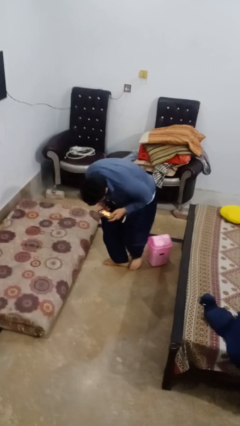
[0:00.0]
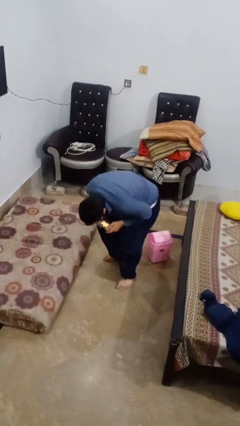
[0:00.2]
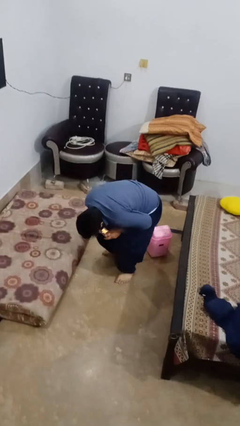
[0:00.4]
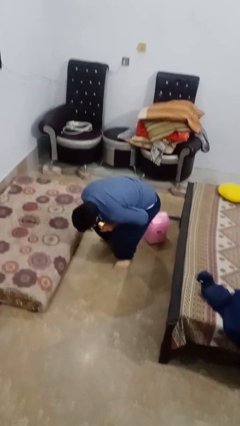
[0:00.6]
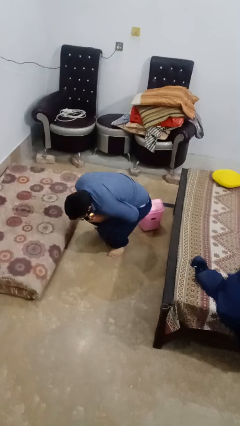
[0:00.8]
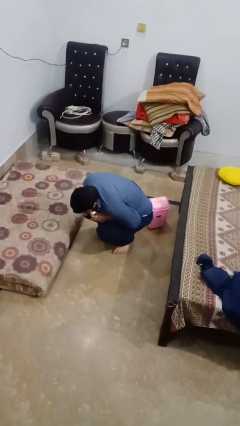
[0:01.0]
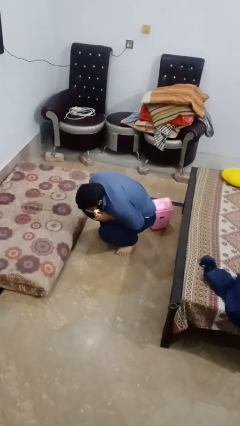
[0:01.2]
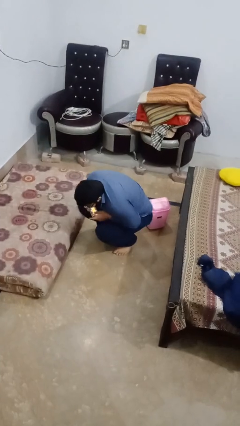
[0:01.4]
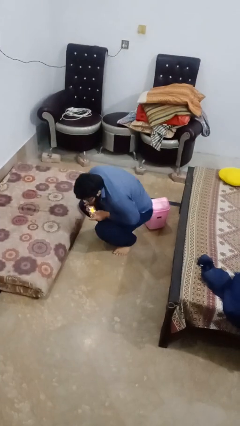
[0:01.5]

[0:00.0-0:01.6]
person lies down on floor

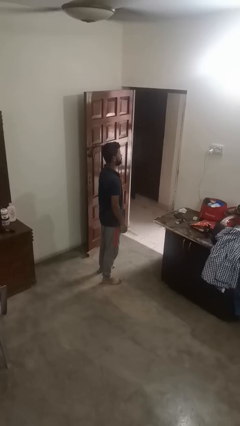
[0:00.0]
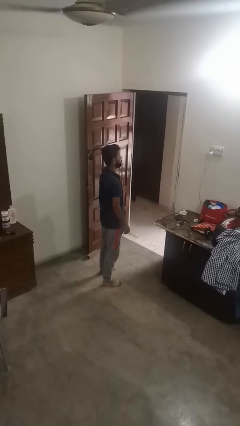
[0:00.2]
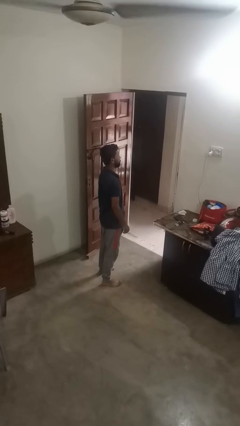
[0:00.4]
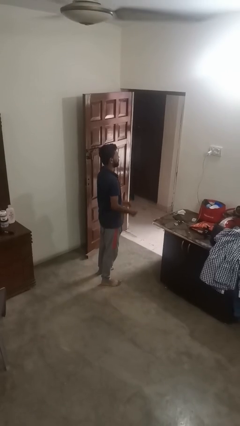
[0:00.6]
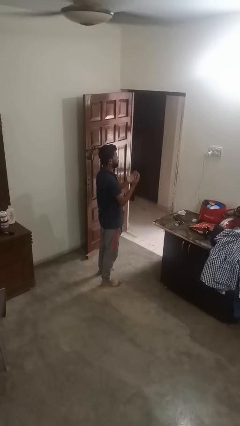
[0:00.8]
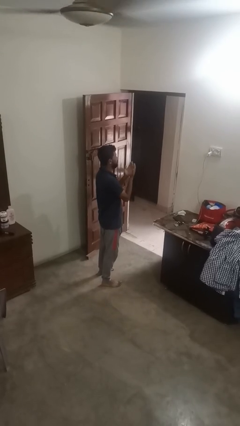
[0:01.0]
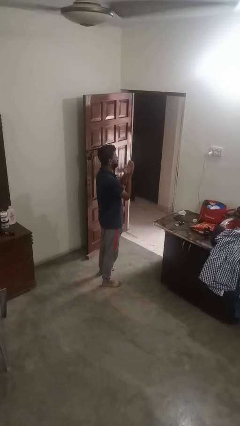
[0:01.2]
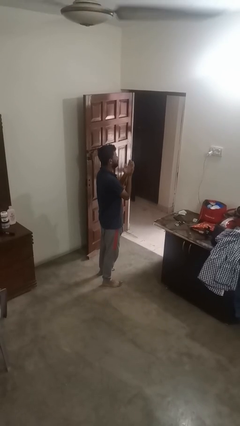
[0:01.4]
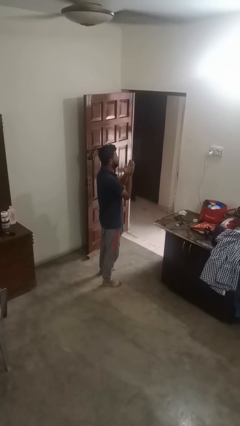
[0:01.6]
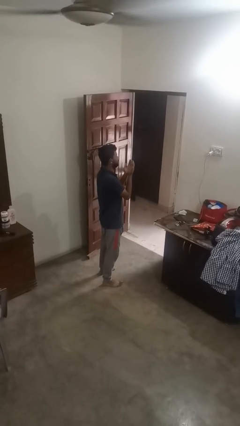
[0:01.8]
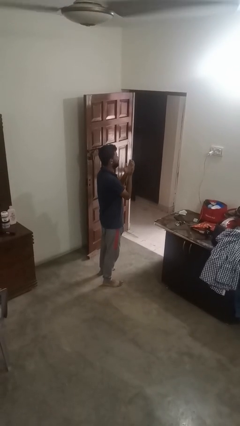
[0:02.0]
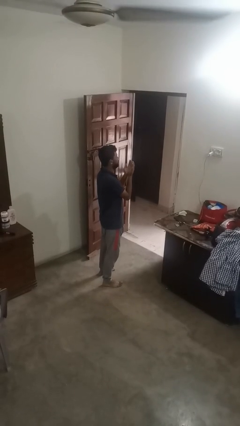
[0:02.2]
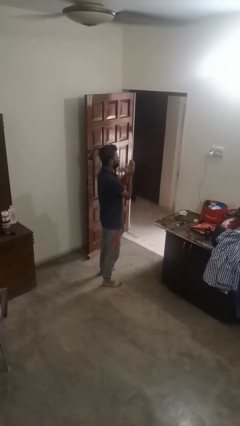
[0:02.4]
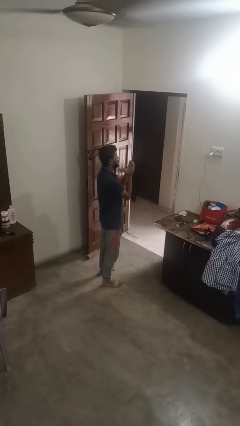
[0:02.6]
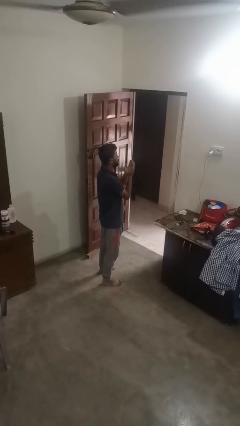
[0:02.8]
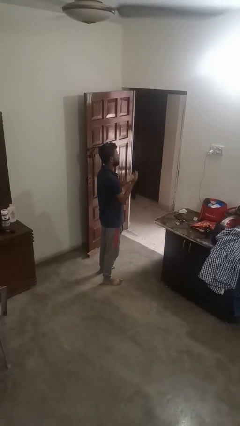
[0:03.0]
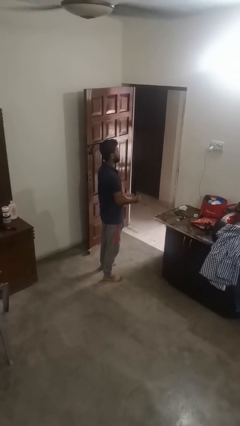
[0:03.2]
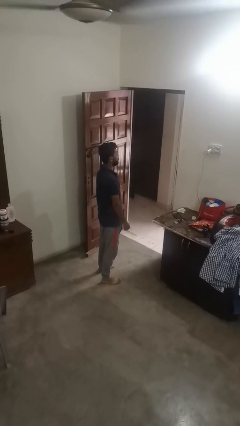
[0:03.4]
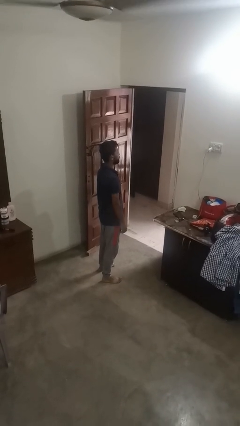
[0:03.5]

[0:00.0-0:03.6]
person prays

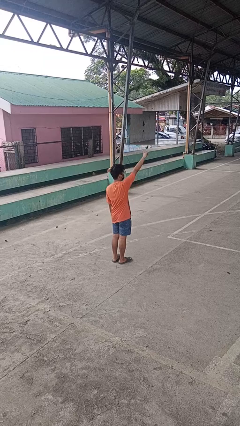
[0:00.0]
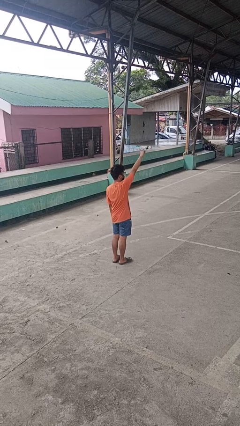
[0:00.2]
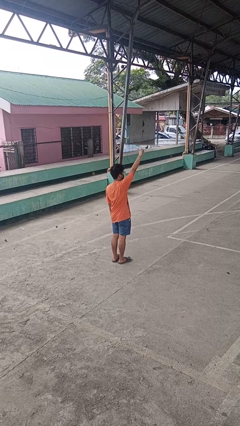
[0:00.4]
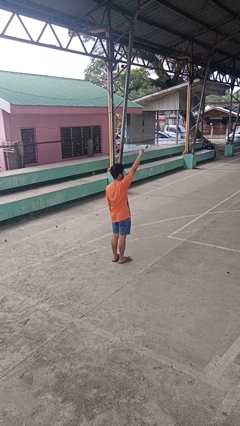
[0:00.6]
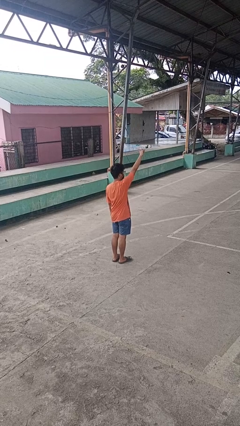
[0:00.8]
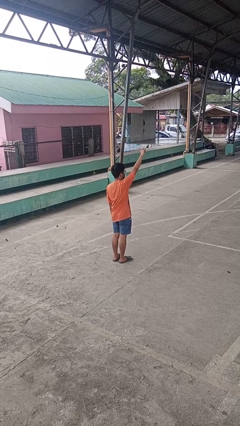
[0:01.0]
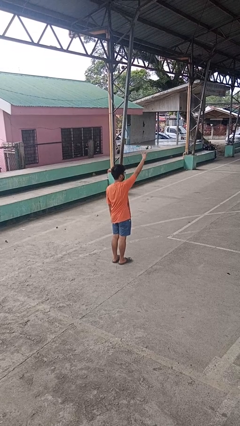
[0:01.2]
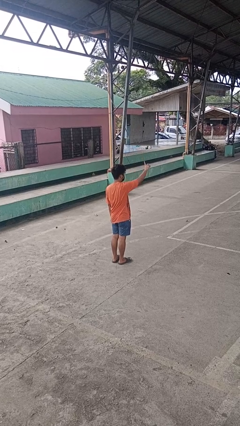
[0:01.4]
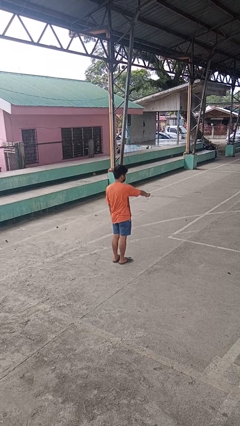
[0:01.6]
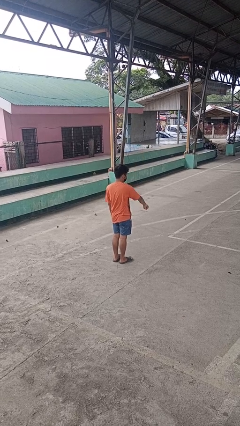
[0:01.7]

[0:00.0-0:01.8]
person gestures swipe up

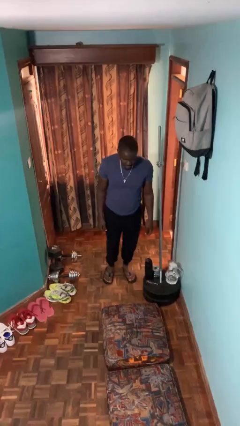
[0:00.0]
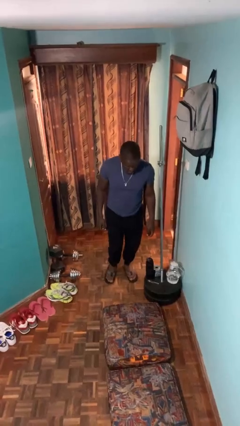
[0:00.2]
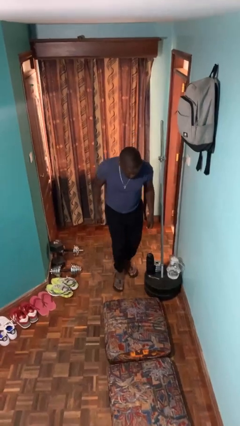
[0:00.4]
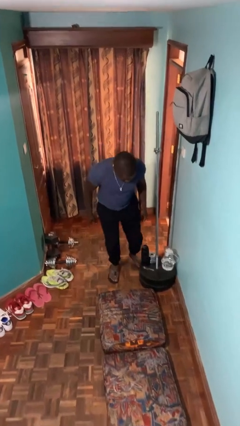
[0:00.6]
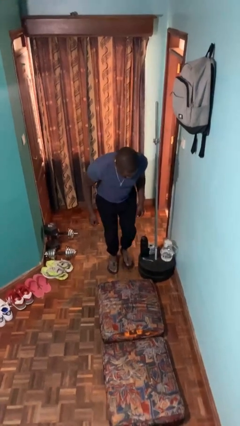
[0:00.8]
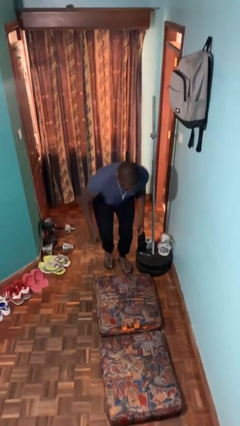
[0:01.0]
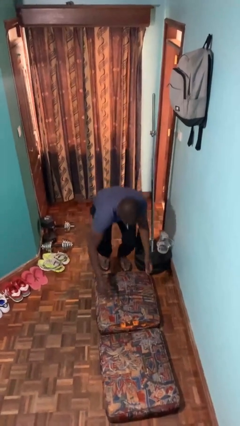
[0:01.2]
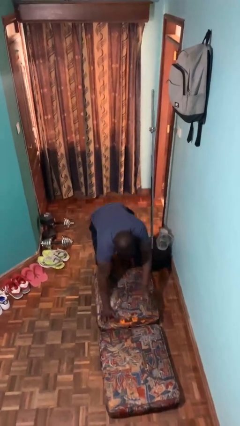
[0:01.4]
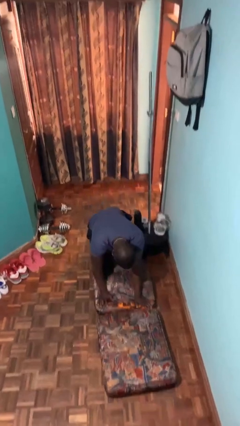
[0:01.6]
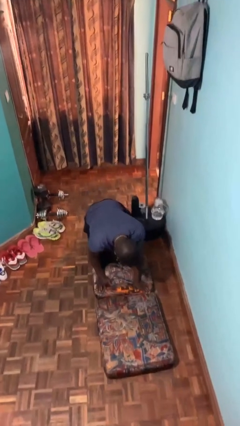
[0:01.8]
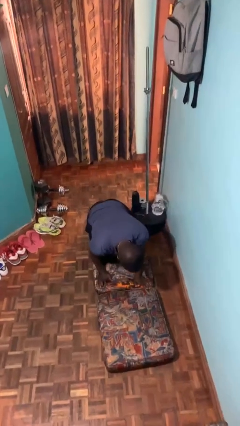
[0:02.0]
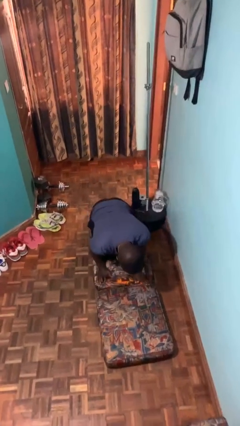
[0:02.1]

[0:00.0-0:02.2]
person trips on object on floor

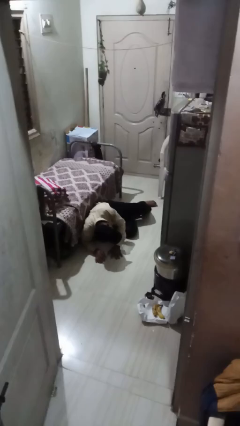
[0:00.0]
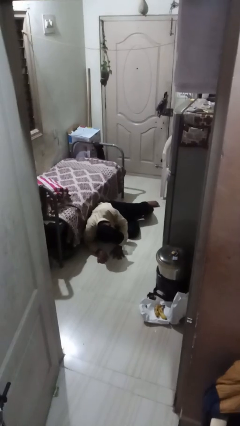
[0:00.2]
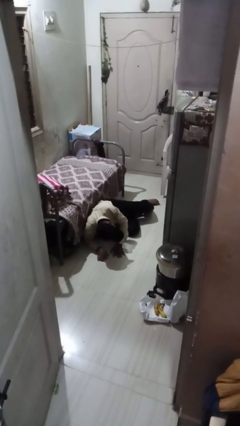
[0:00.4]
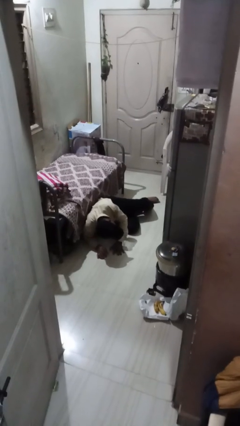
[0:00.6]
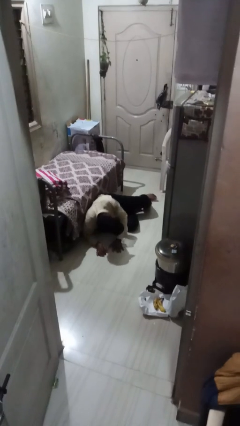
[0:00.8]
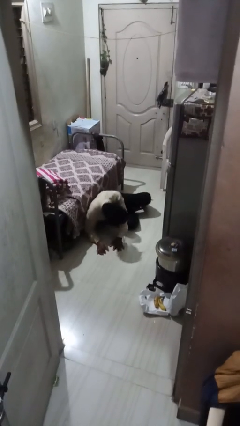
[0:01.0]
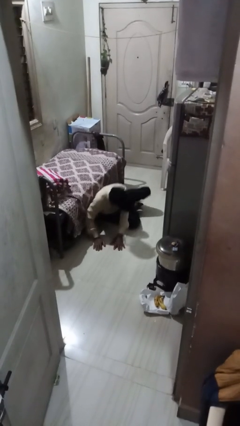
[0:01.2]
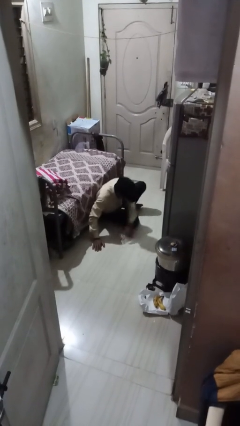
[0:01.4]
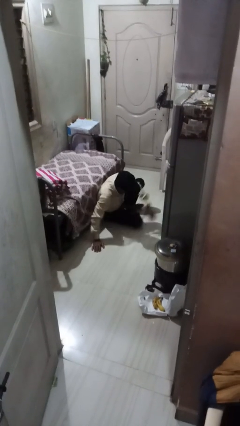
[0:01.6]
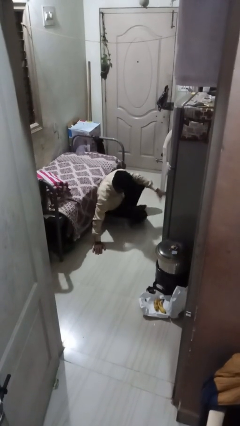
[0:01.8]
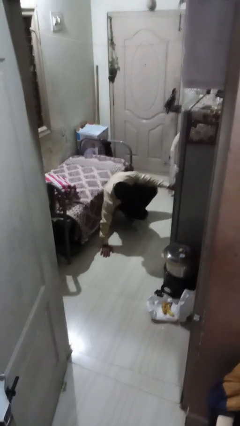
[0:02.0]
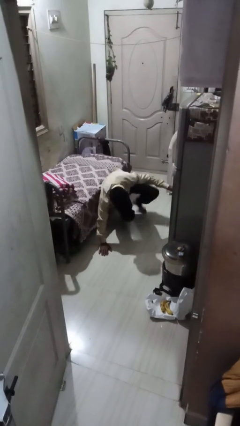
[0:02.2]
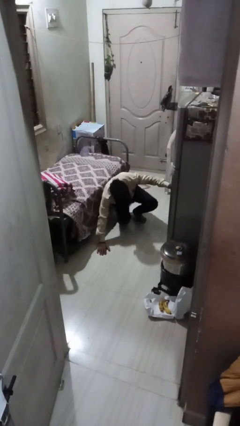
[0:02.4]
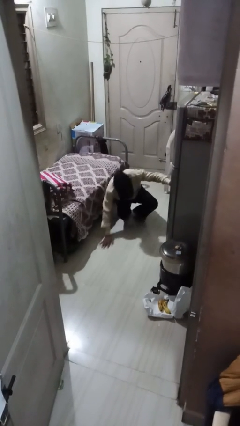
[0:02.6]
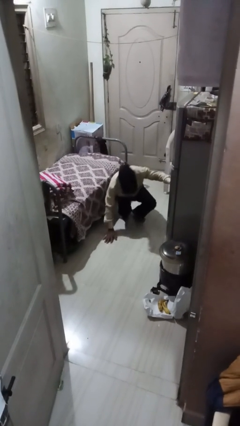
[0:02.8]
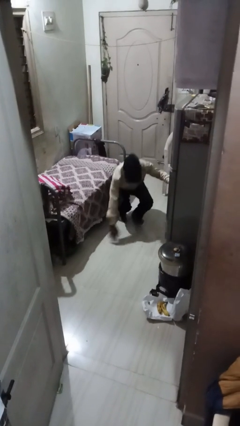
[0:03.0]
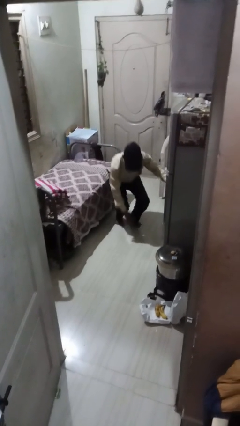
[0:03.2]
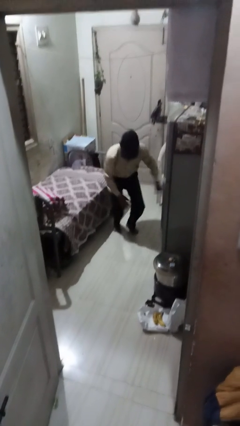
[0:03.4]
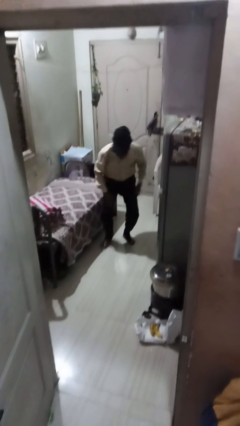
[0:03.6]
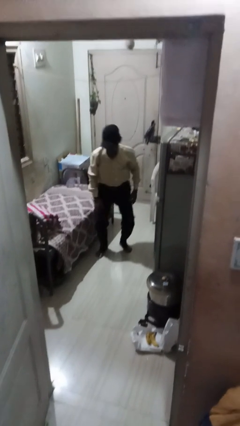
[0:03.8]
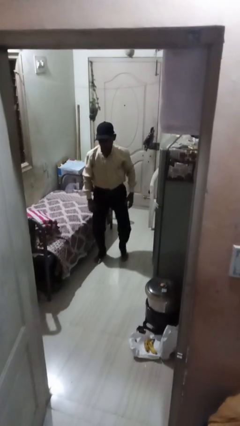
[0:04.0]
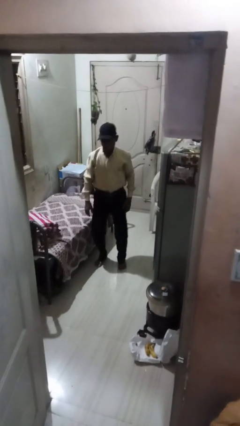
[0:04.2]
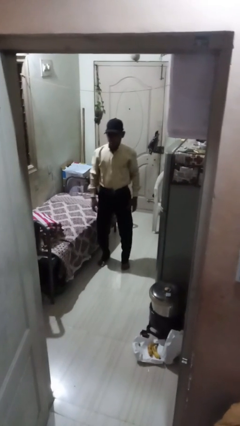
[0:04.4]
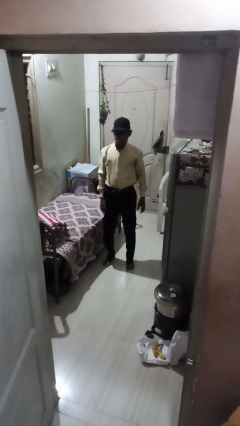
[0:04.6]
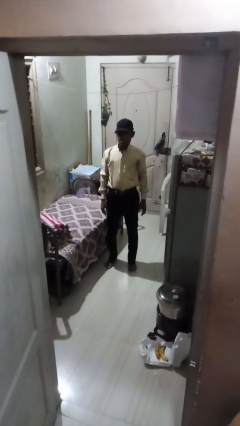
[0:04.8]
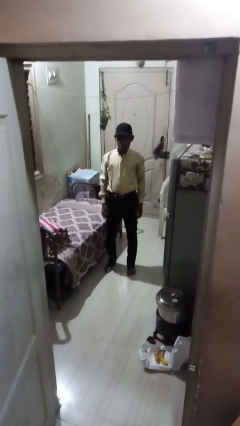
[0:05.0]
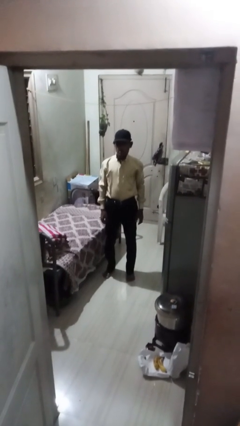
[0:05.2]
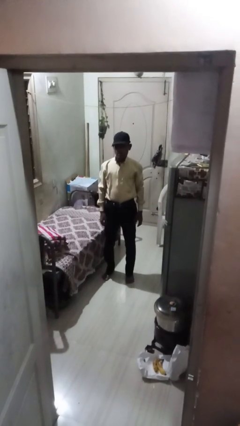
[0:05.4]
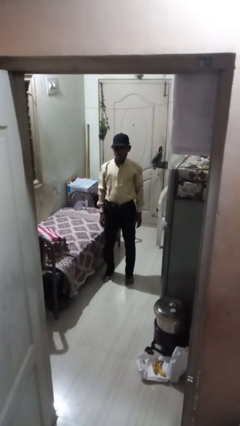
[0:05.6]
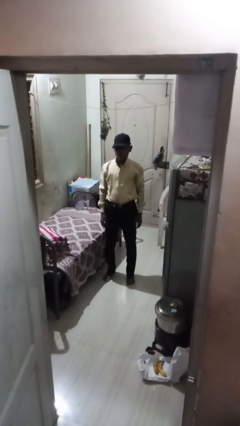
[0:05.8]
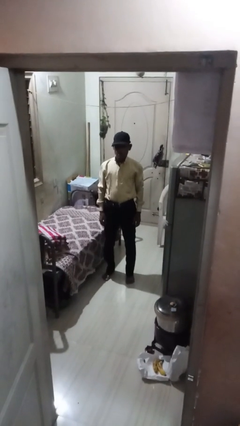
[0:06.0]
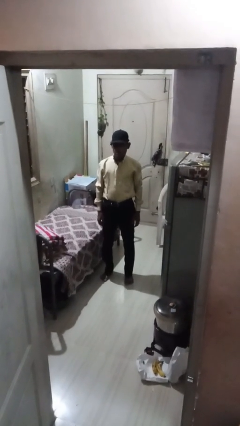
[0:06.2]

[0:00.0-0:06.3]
person stands up from floor

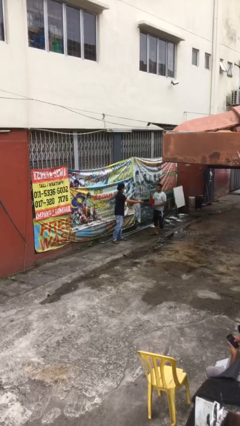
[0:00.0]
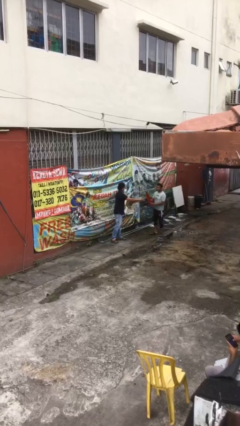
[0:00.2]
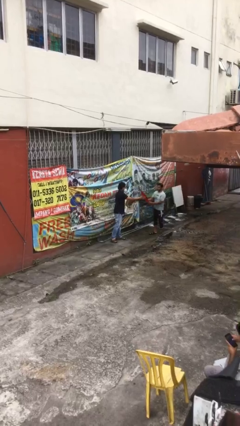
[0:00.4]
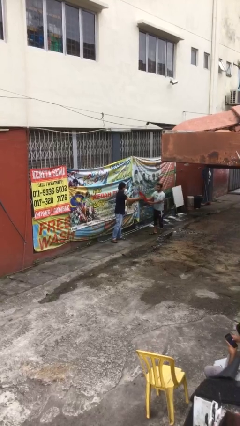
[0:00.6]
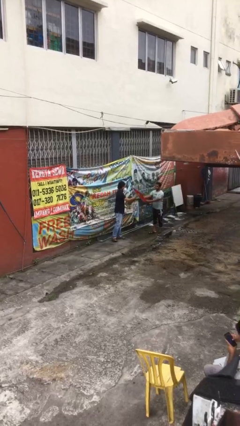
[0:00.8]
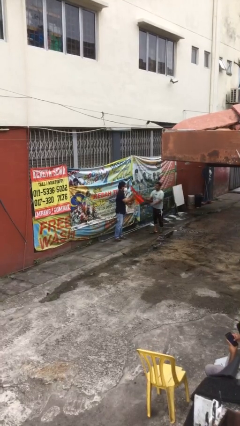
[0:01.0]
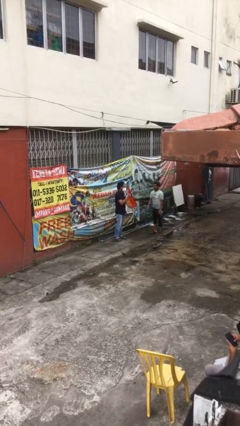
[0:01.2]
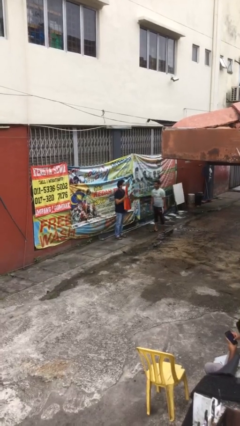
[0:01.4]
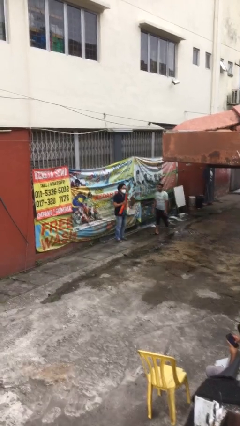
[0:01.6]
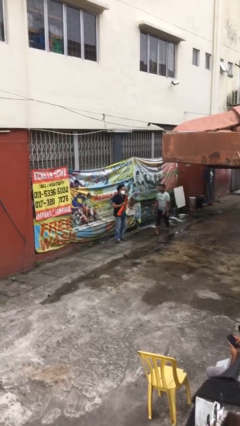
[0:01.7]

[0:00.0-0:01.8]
person transfers object to person

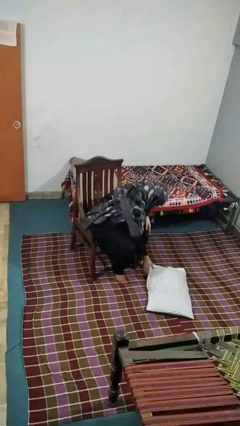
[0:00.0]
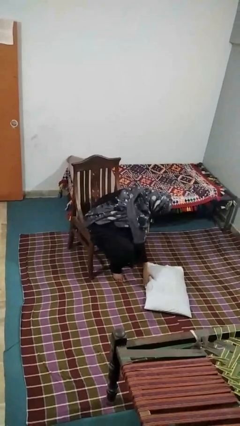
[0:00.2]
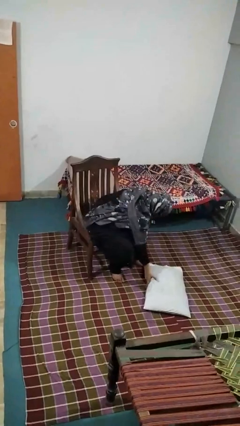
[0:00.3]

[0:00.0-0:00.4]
person drops object
